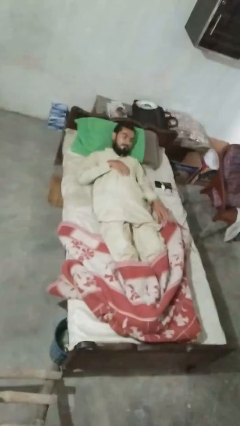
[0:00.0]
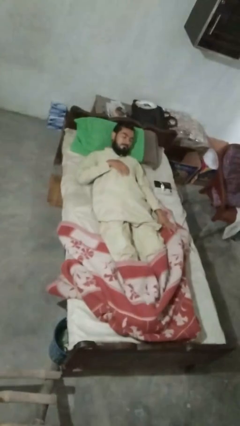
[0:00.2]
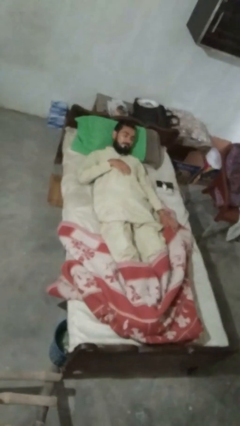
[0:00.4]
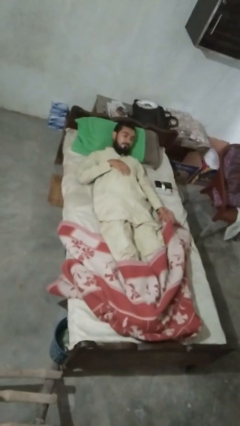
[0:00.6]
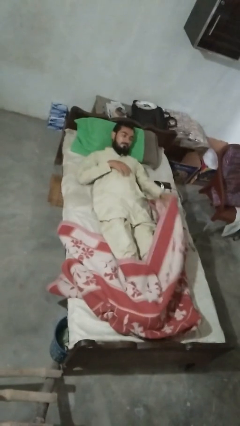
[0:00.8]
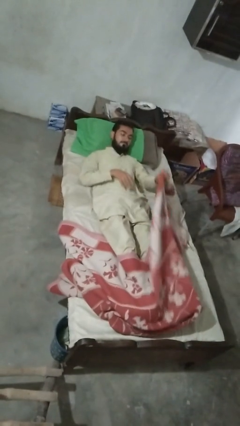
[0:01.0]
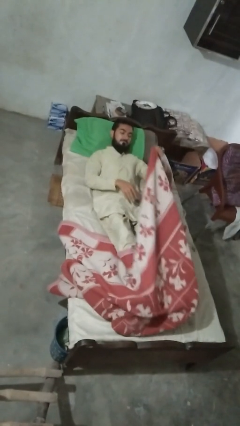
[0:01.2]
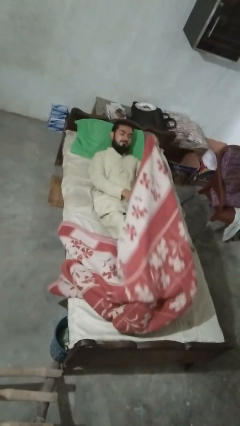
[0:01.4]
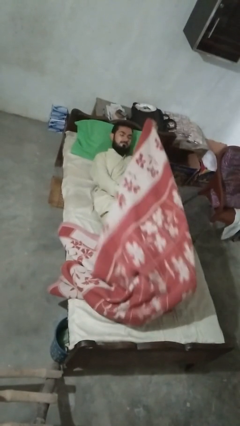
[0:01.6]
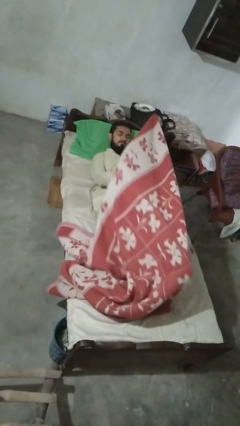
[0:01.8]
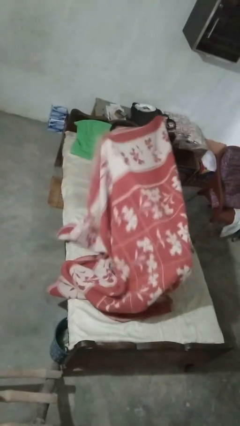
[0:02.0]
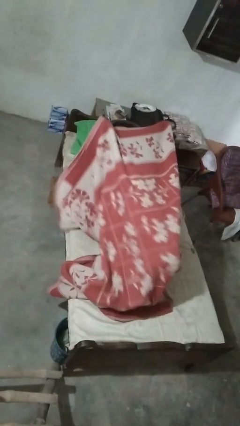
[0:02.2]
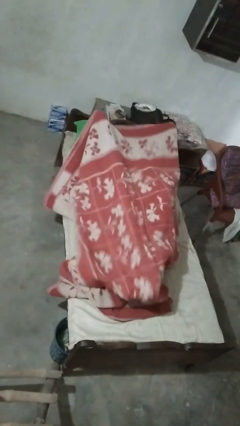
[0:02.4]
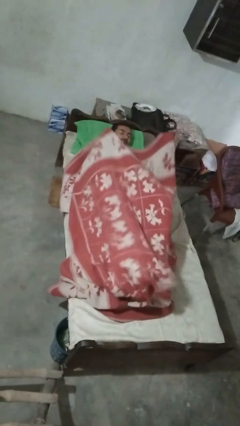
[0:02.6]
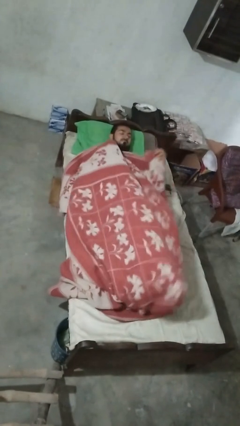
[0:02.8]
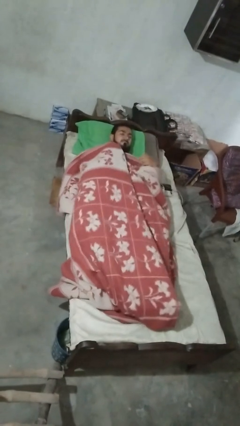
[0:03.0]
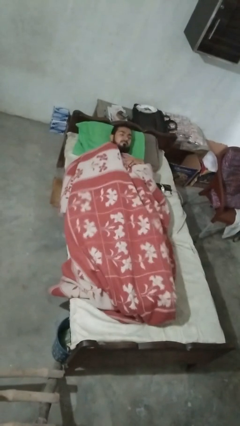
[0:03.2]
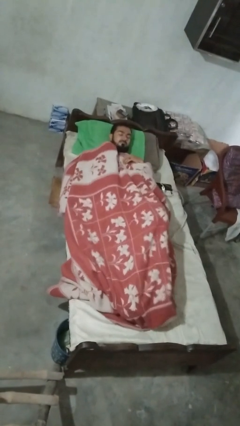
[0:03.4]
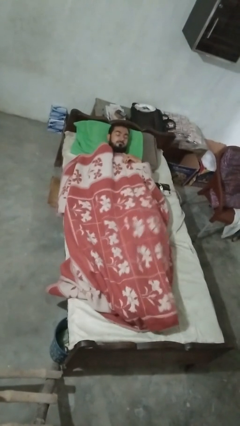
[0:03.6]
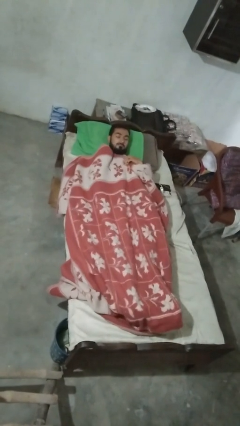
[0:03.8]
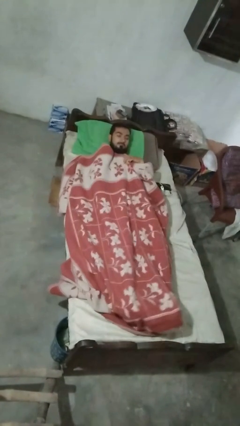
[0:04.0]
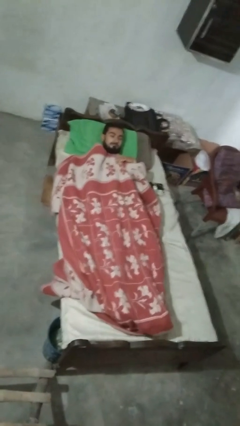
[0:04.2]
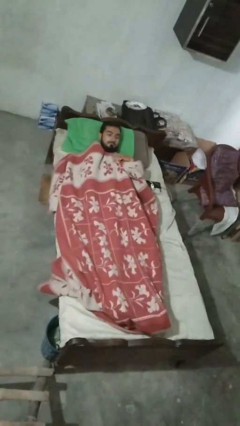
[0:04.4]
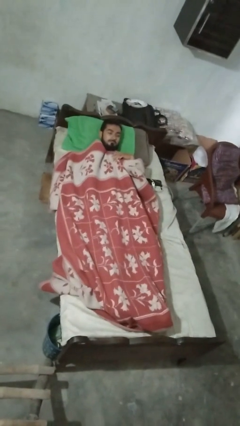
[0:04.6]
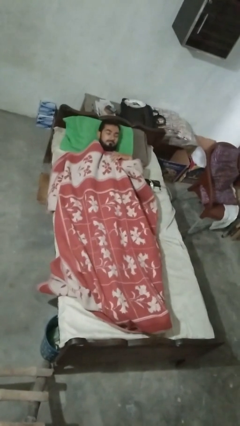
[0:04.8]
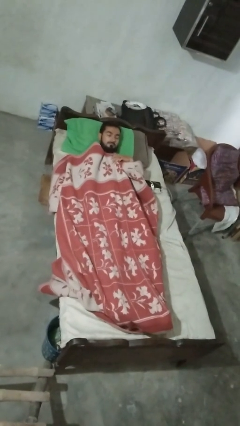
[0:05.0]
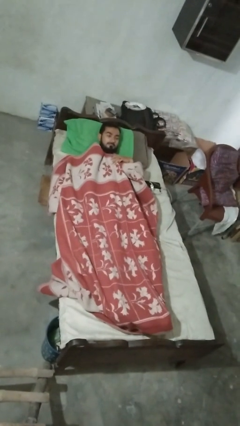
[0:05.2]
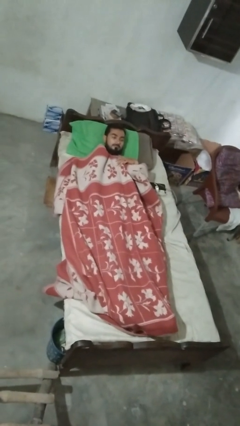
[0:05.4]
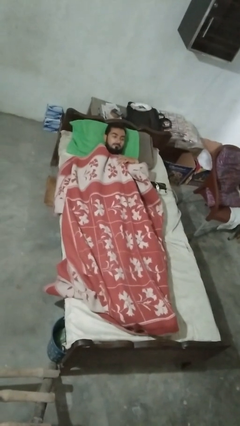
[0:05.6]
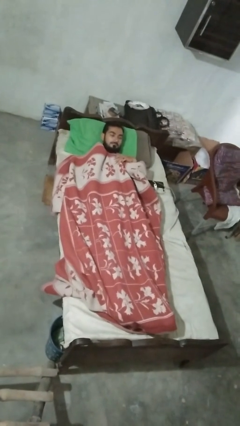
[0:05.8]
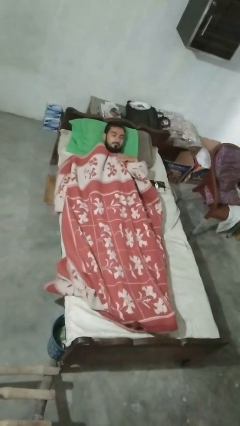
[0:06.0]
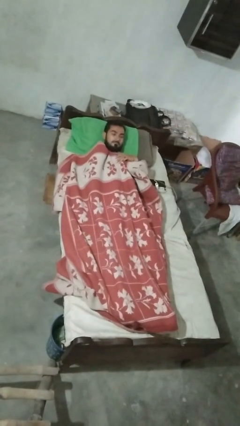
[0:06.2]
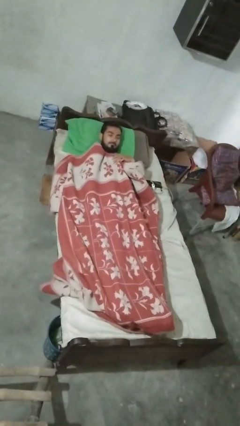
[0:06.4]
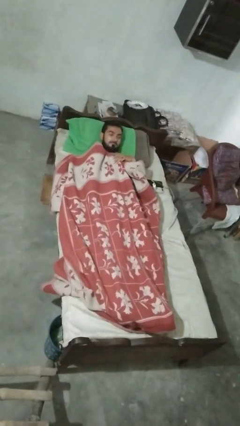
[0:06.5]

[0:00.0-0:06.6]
person covers with bedsheets

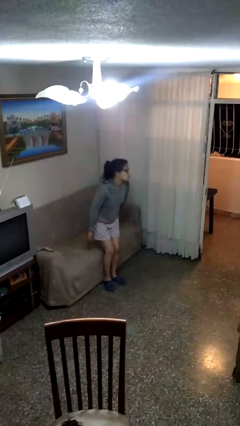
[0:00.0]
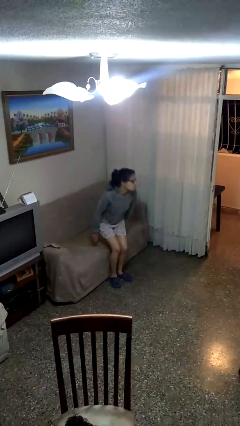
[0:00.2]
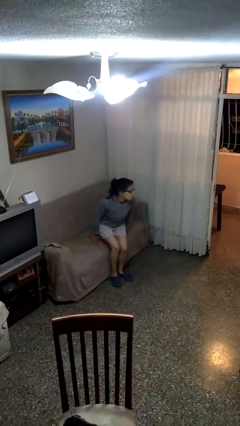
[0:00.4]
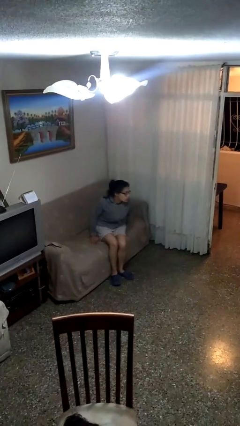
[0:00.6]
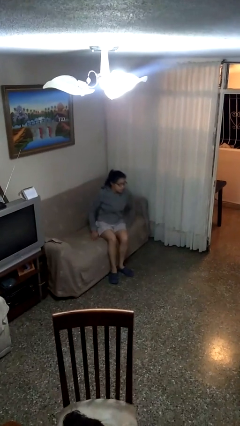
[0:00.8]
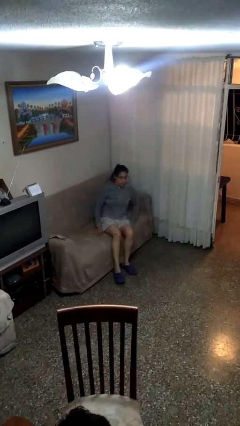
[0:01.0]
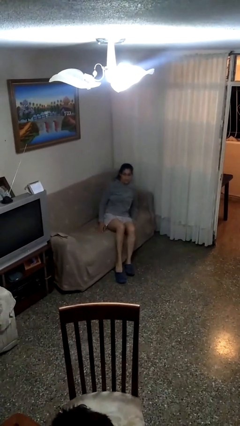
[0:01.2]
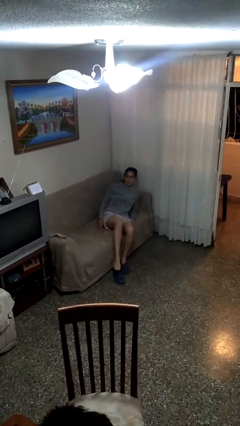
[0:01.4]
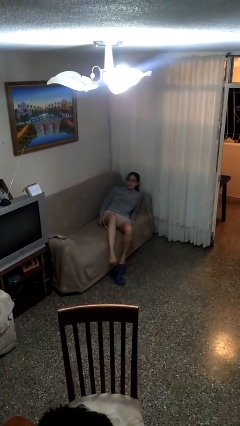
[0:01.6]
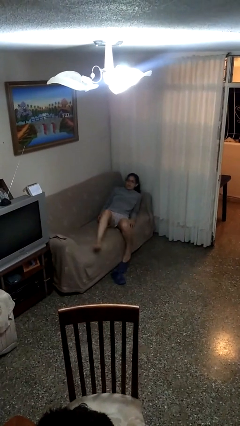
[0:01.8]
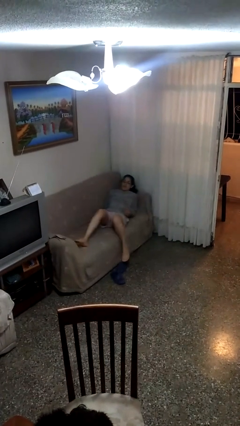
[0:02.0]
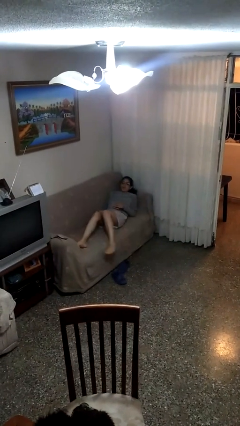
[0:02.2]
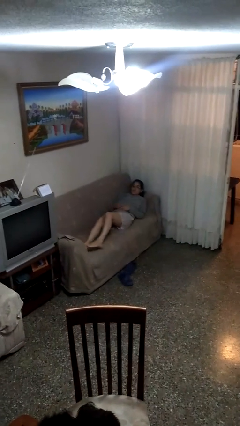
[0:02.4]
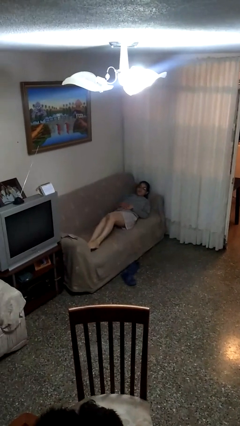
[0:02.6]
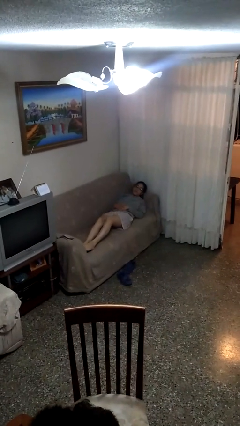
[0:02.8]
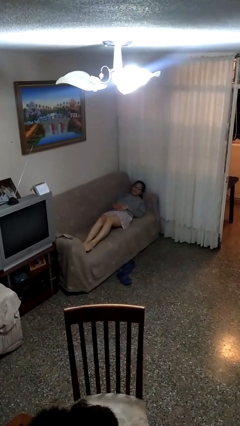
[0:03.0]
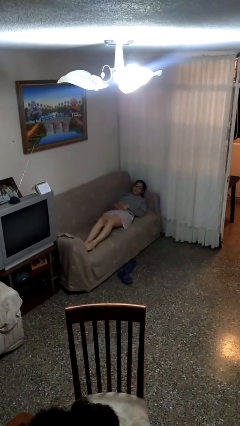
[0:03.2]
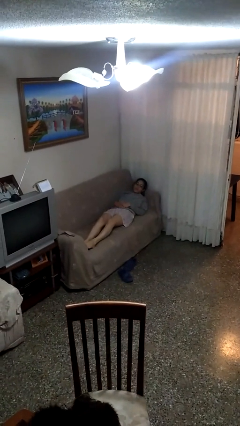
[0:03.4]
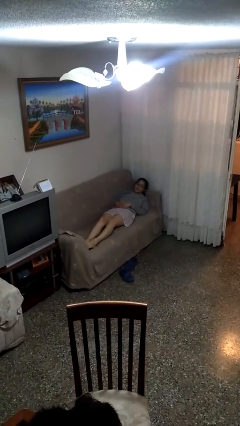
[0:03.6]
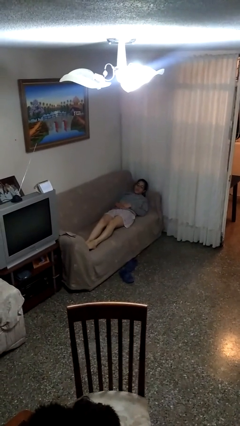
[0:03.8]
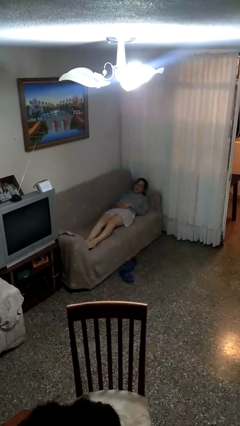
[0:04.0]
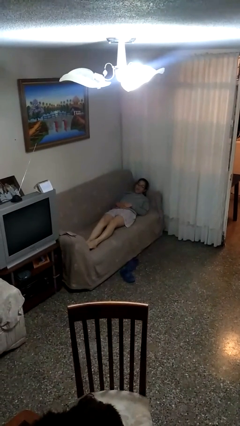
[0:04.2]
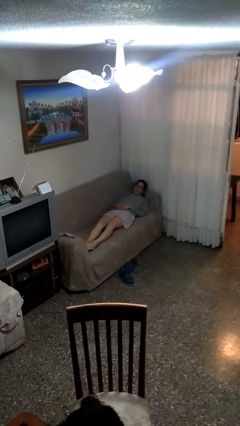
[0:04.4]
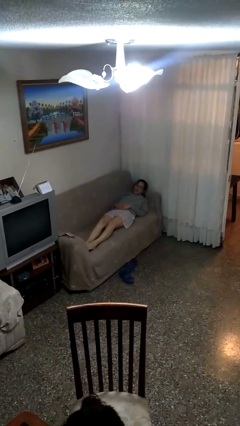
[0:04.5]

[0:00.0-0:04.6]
person lies down on couch

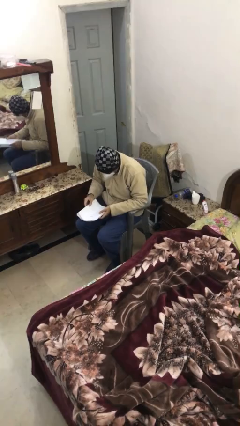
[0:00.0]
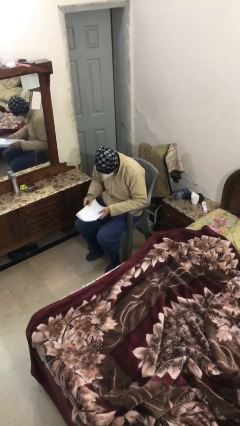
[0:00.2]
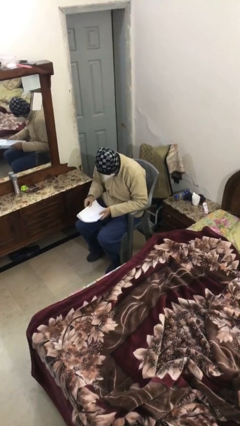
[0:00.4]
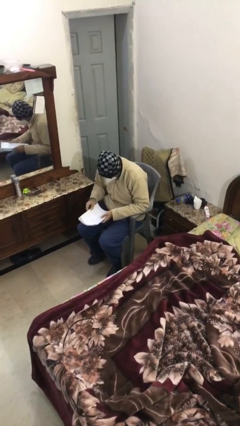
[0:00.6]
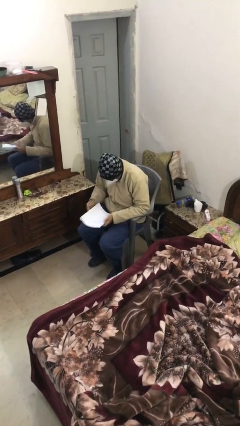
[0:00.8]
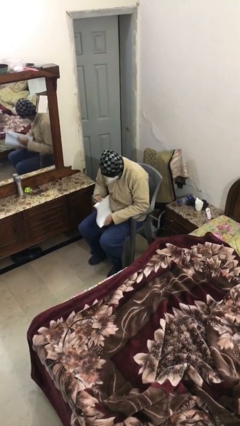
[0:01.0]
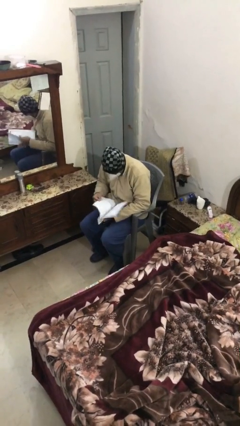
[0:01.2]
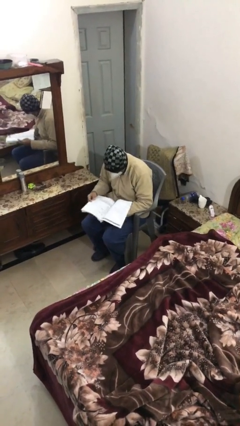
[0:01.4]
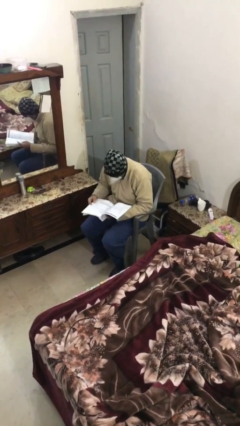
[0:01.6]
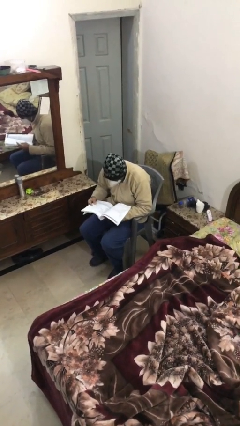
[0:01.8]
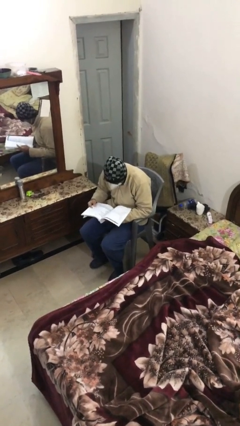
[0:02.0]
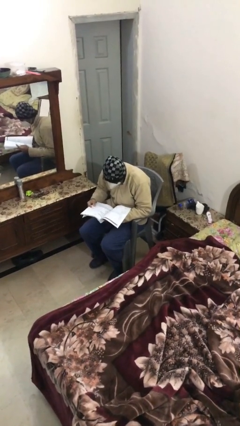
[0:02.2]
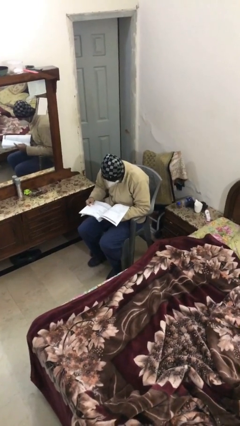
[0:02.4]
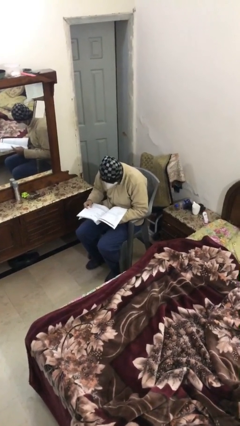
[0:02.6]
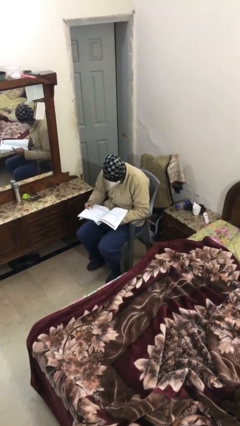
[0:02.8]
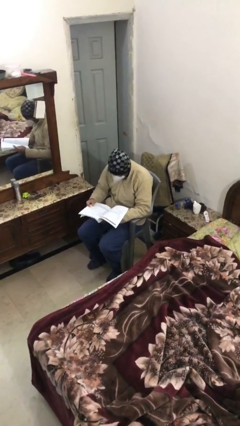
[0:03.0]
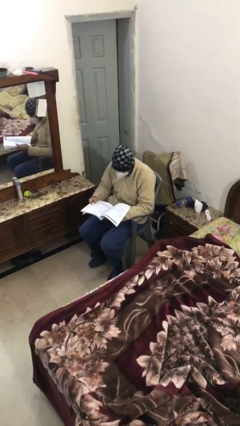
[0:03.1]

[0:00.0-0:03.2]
person reads document

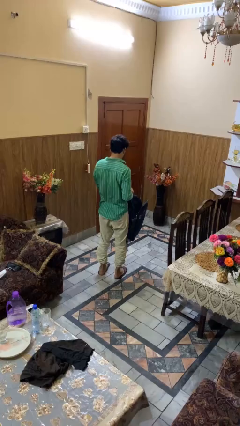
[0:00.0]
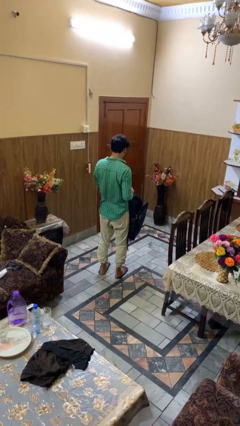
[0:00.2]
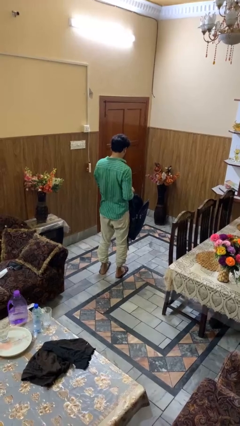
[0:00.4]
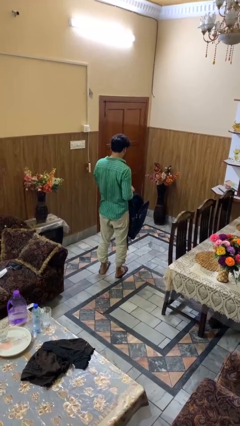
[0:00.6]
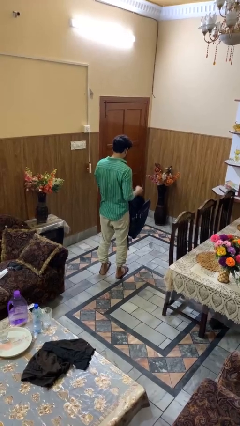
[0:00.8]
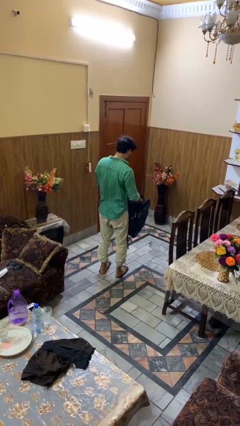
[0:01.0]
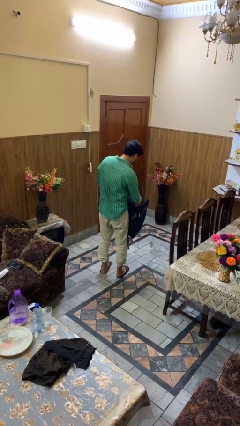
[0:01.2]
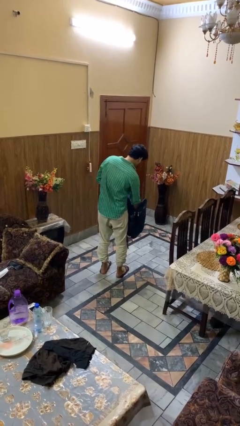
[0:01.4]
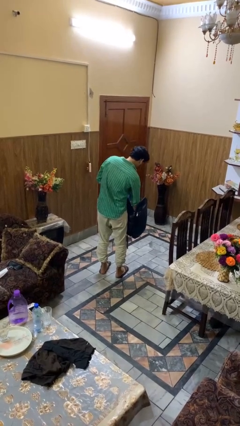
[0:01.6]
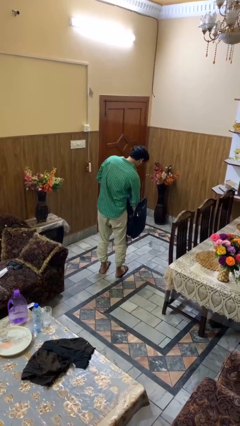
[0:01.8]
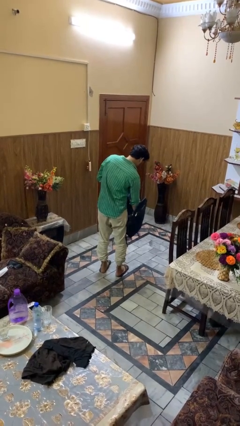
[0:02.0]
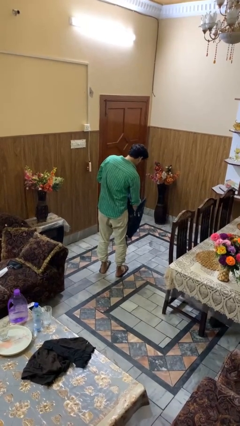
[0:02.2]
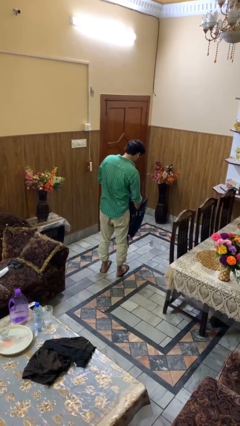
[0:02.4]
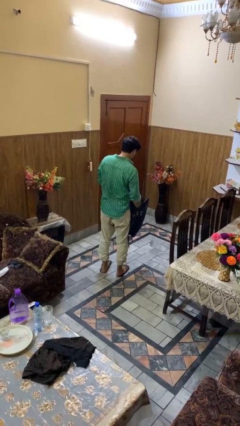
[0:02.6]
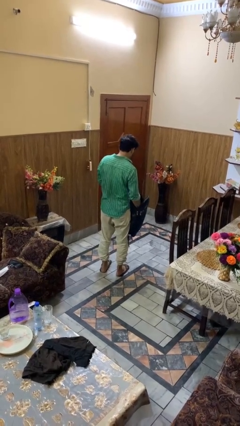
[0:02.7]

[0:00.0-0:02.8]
person searches in backpack

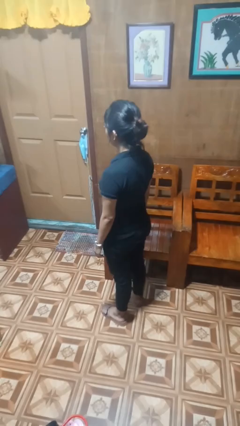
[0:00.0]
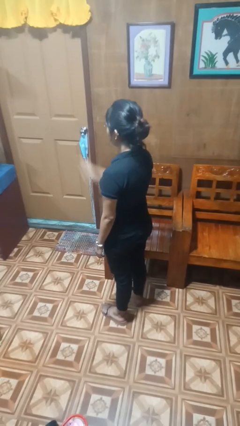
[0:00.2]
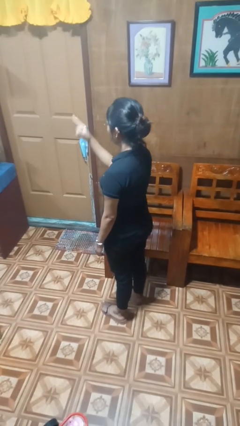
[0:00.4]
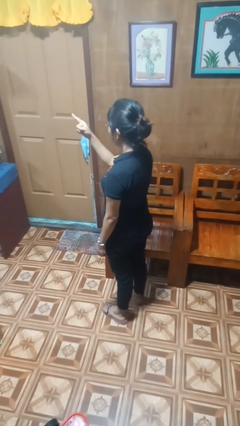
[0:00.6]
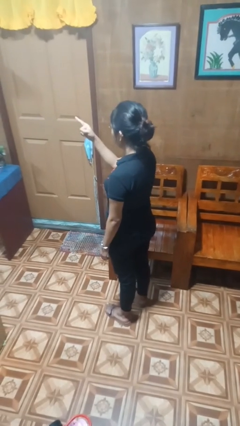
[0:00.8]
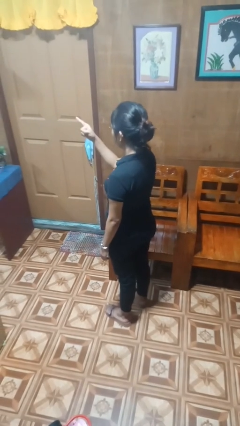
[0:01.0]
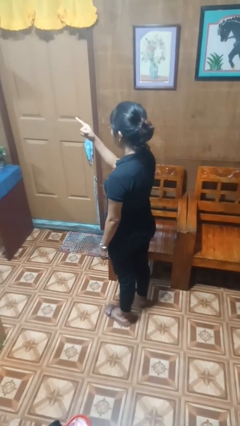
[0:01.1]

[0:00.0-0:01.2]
person points at person
